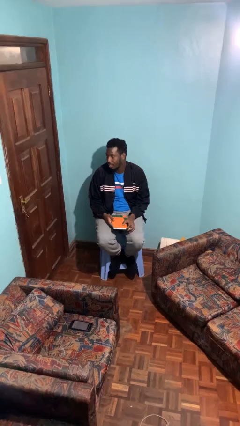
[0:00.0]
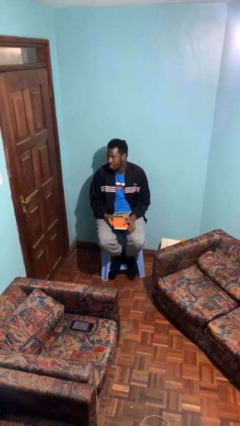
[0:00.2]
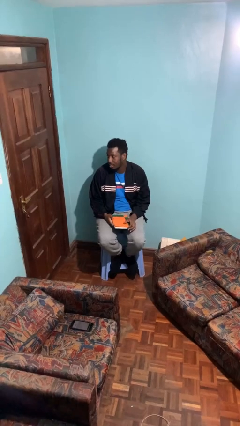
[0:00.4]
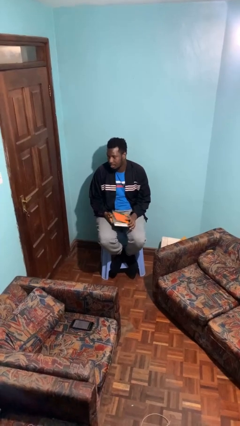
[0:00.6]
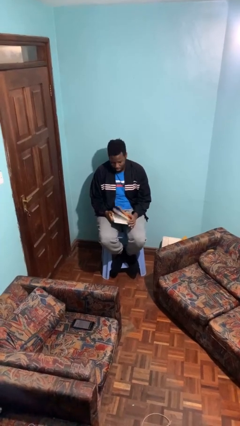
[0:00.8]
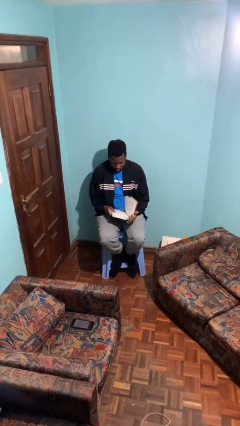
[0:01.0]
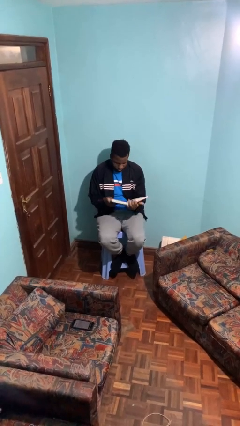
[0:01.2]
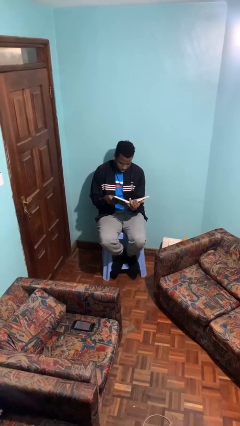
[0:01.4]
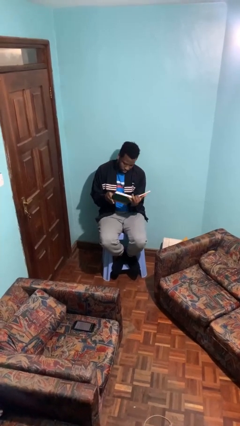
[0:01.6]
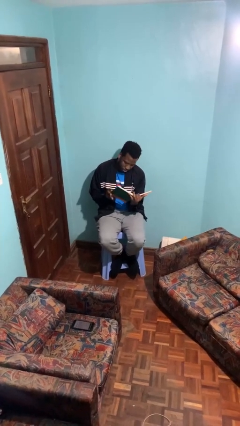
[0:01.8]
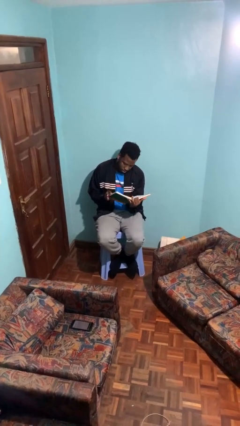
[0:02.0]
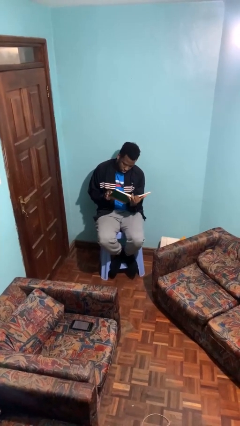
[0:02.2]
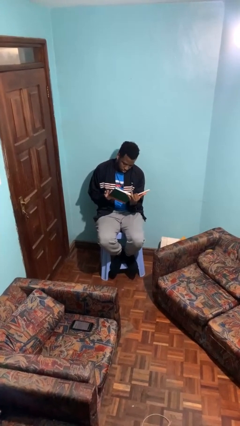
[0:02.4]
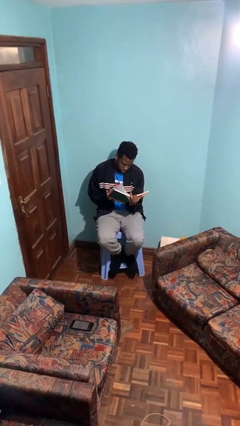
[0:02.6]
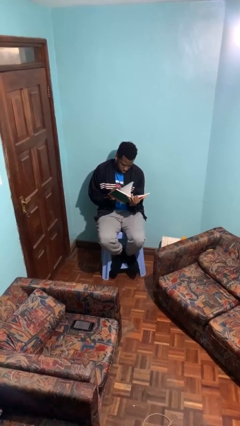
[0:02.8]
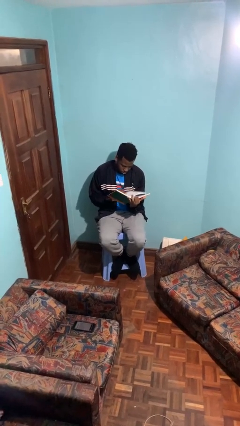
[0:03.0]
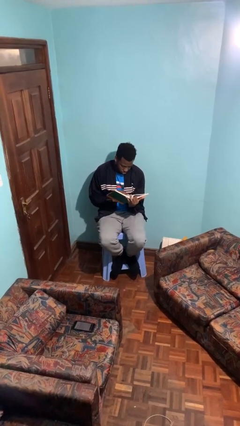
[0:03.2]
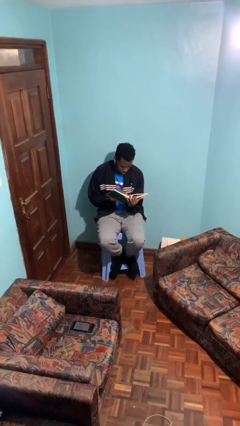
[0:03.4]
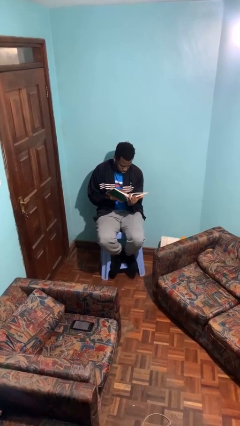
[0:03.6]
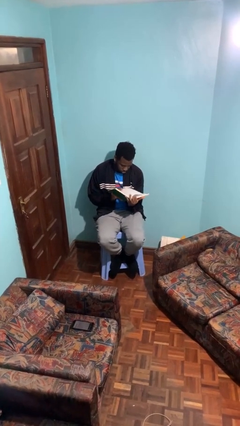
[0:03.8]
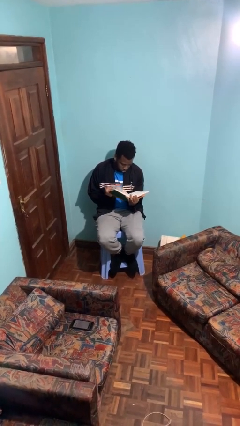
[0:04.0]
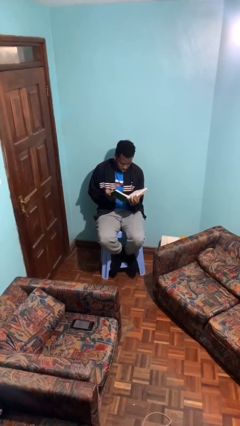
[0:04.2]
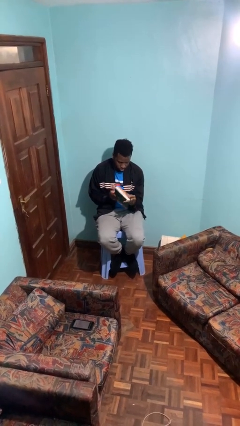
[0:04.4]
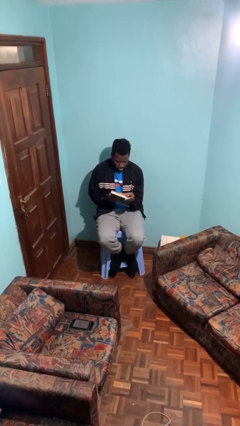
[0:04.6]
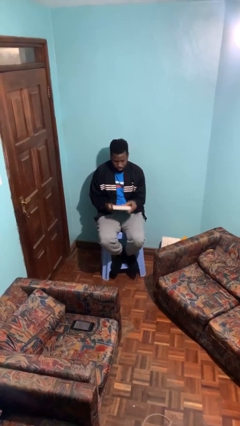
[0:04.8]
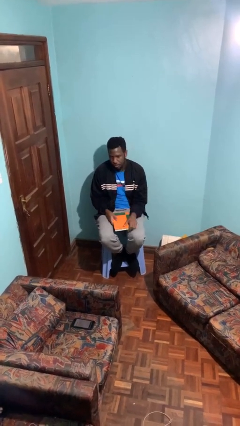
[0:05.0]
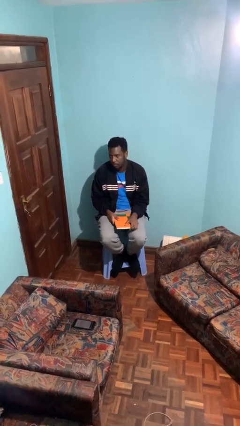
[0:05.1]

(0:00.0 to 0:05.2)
person reads book

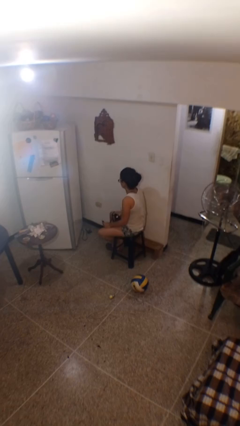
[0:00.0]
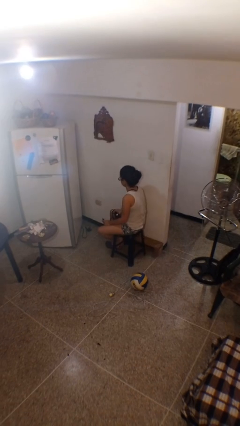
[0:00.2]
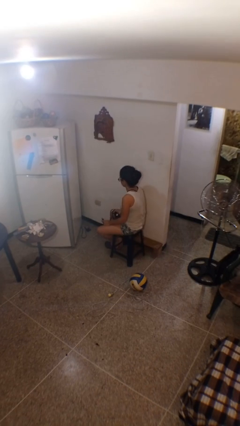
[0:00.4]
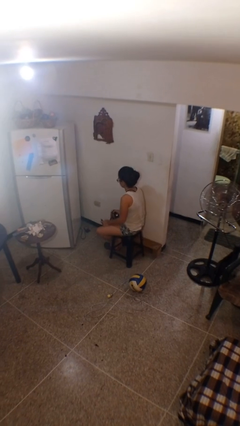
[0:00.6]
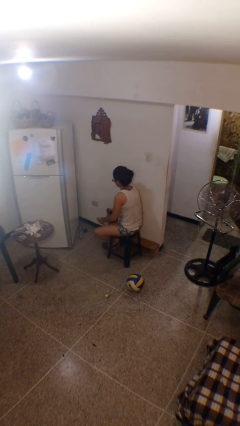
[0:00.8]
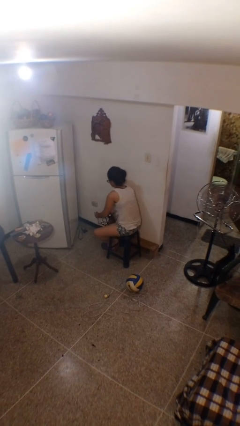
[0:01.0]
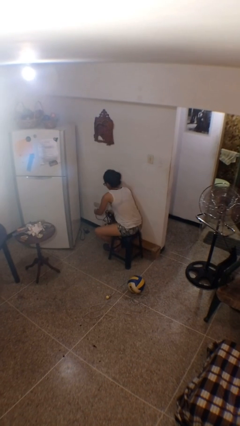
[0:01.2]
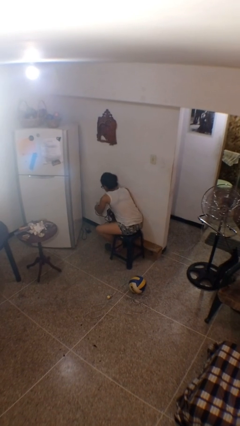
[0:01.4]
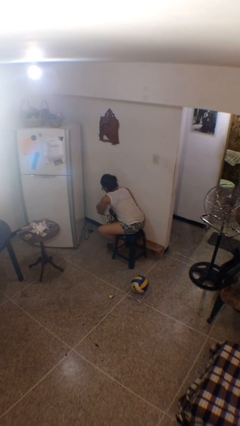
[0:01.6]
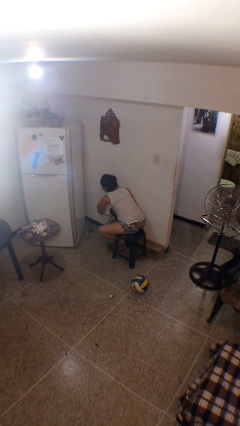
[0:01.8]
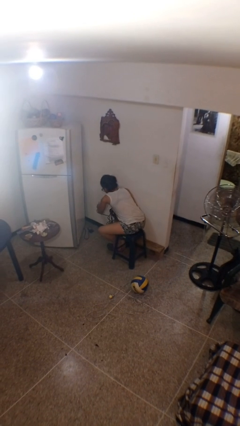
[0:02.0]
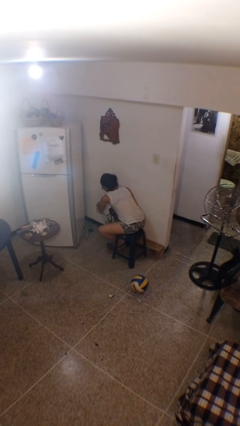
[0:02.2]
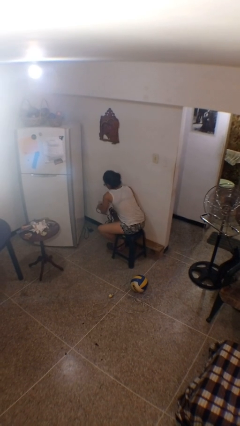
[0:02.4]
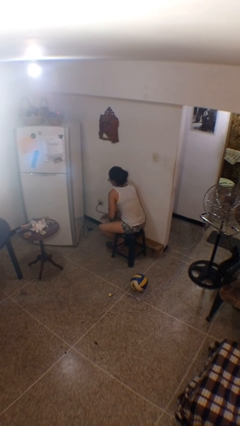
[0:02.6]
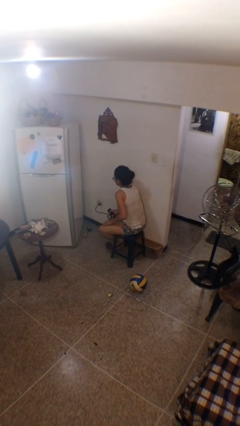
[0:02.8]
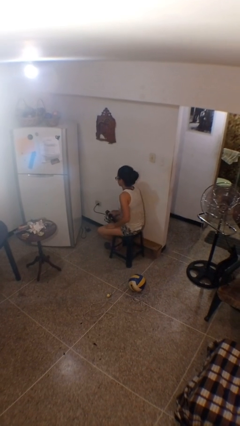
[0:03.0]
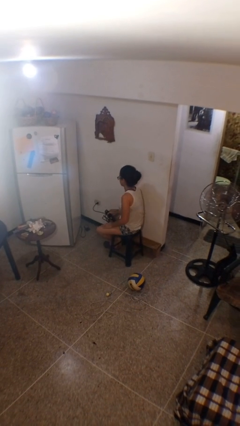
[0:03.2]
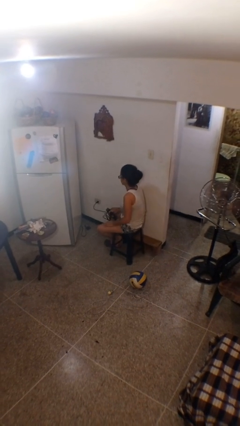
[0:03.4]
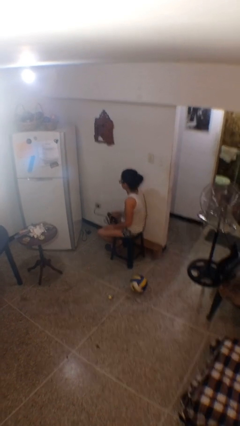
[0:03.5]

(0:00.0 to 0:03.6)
person plugs into electrical socket

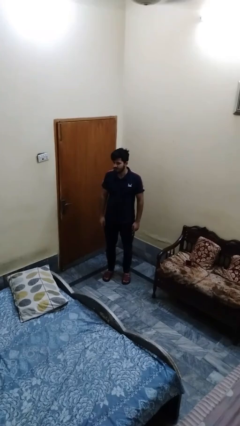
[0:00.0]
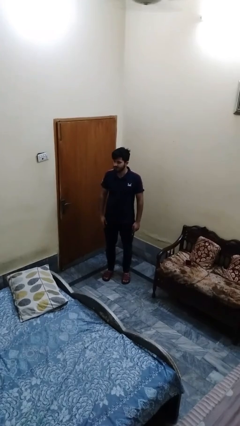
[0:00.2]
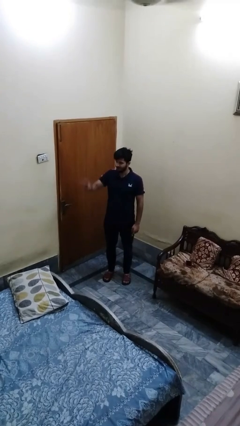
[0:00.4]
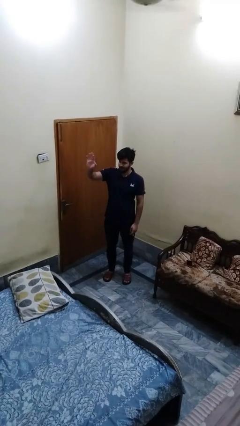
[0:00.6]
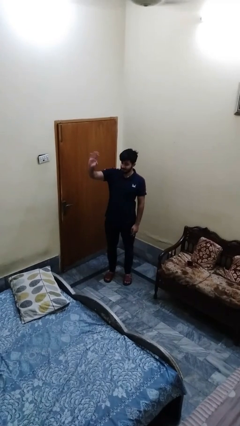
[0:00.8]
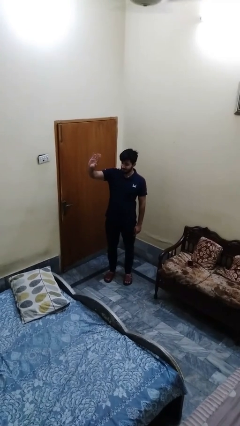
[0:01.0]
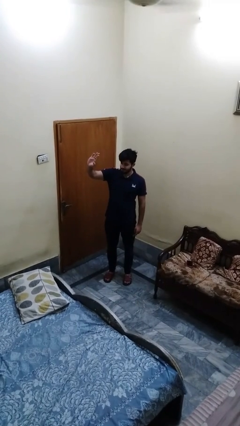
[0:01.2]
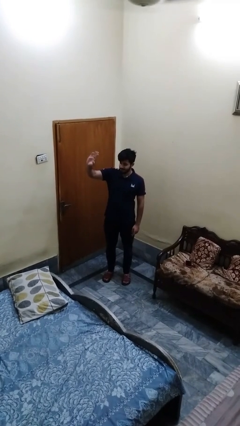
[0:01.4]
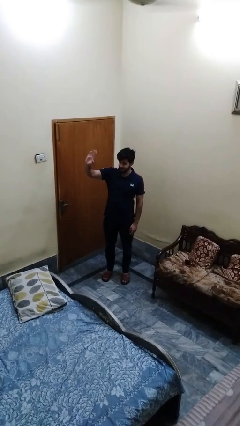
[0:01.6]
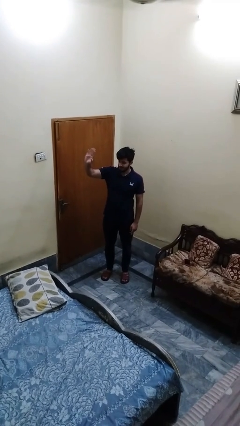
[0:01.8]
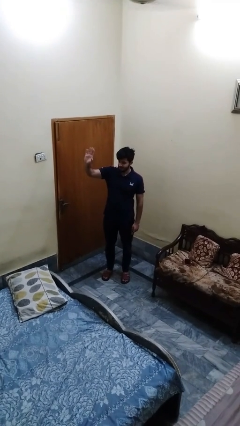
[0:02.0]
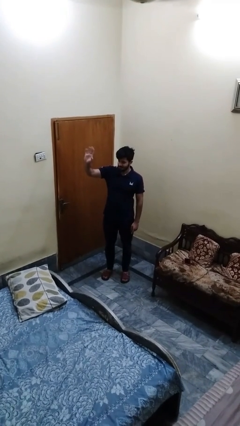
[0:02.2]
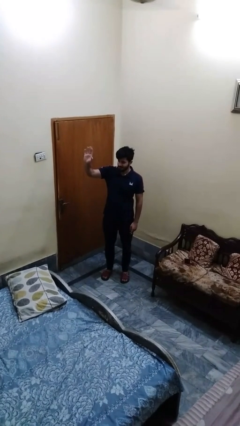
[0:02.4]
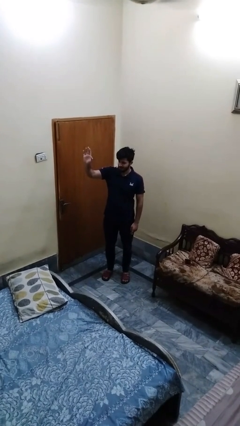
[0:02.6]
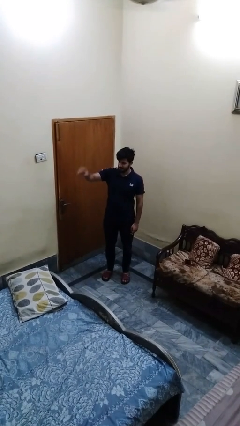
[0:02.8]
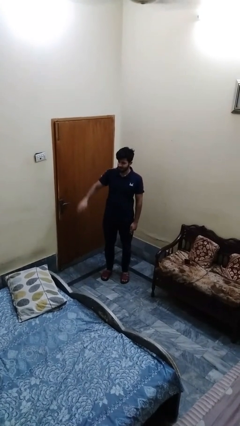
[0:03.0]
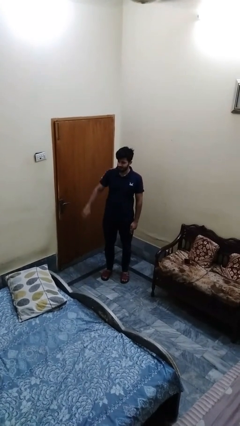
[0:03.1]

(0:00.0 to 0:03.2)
person waves at person

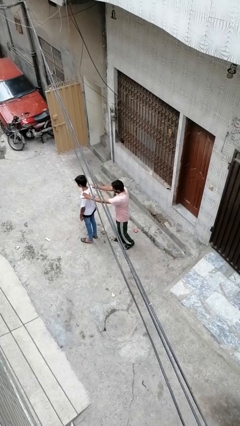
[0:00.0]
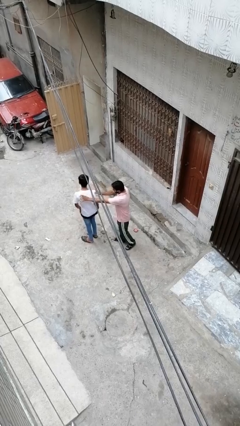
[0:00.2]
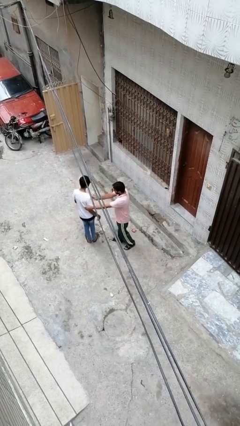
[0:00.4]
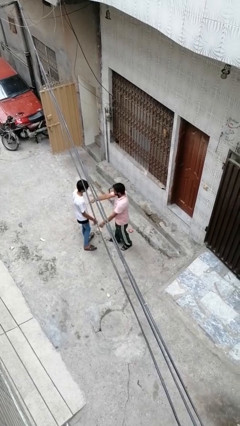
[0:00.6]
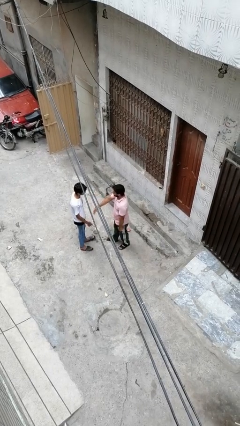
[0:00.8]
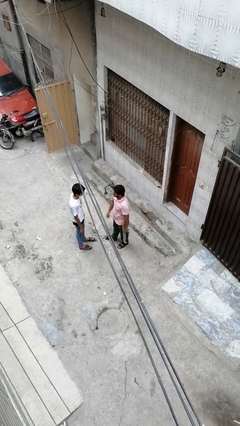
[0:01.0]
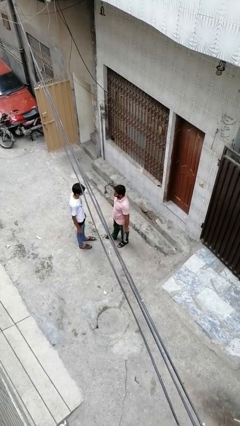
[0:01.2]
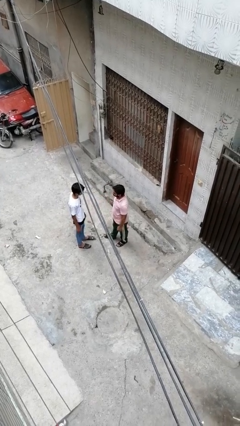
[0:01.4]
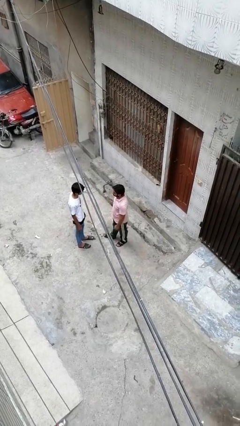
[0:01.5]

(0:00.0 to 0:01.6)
person spins person around

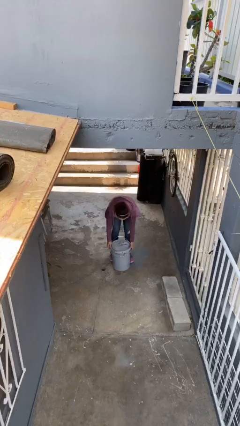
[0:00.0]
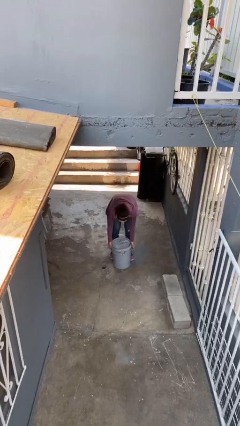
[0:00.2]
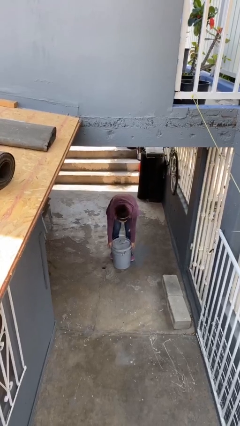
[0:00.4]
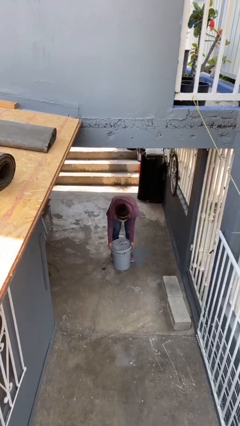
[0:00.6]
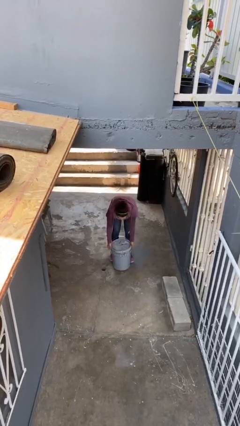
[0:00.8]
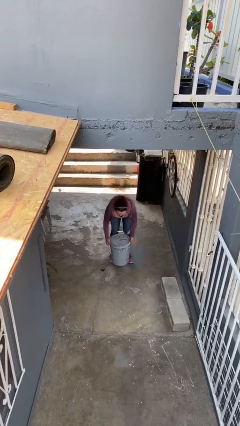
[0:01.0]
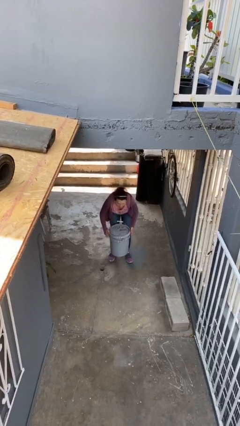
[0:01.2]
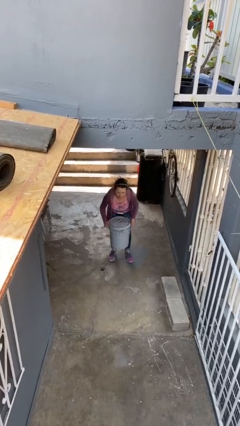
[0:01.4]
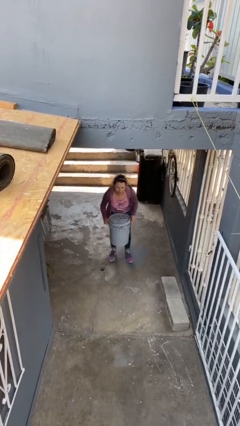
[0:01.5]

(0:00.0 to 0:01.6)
person picks up object from floor

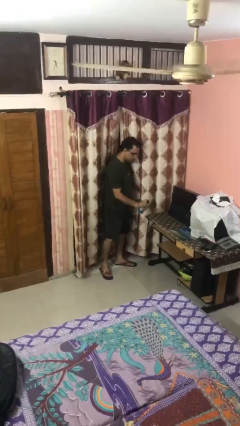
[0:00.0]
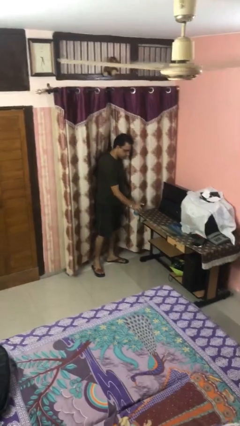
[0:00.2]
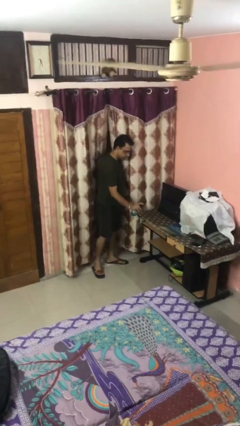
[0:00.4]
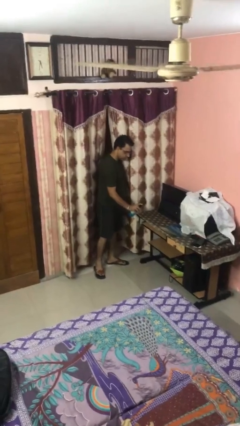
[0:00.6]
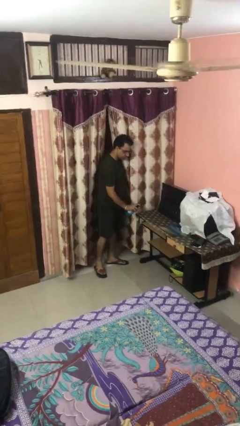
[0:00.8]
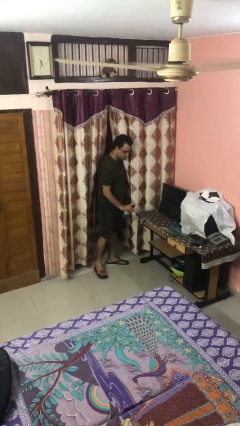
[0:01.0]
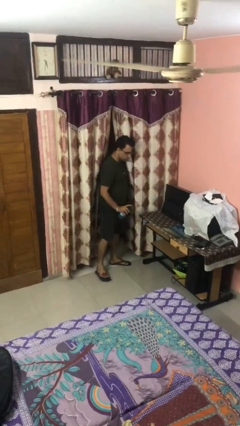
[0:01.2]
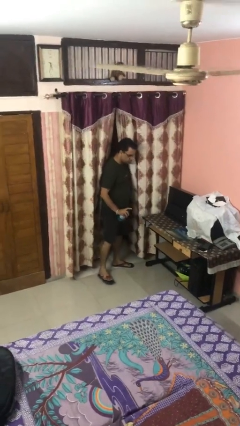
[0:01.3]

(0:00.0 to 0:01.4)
person sprays from bottle

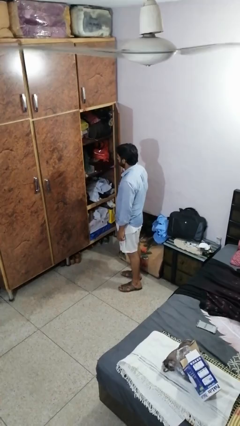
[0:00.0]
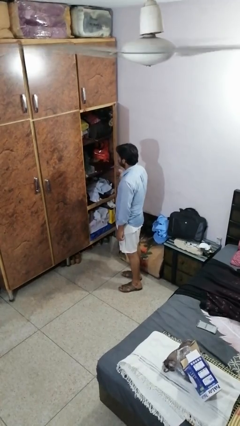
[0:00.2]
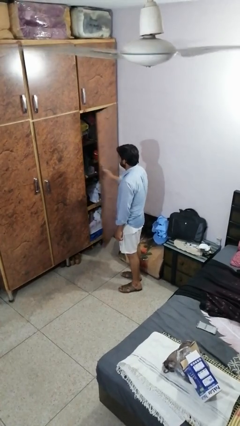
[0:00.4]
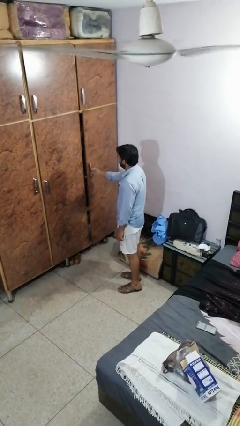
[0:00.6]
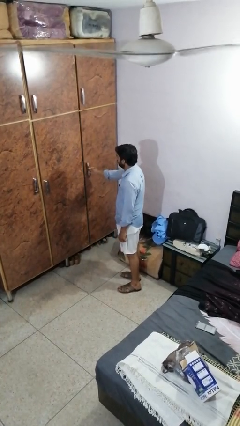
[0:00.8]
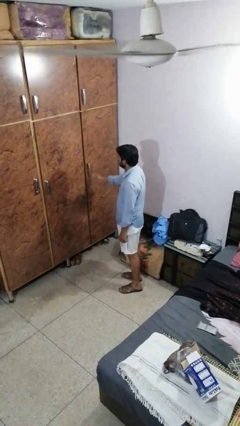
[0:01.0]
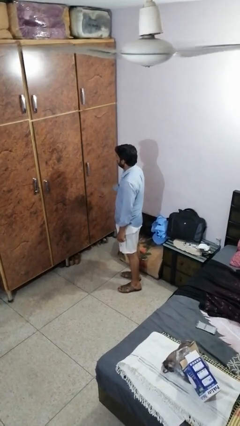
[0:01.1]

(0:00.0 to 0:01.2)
person closes closet door
